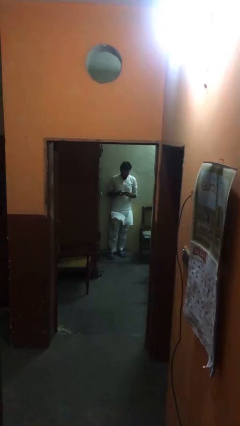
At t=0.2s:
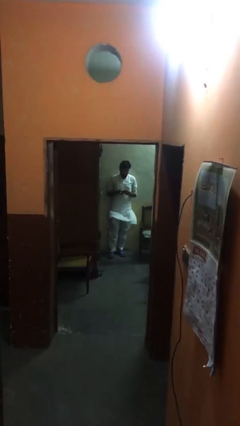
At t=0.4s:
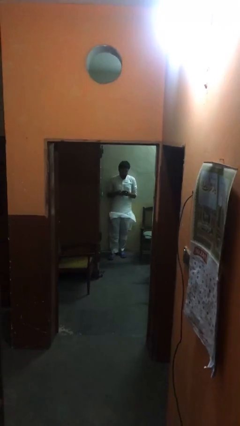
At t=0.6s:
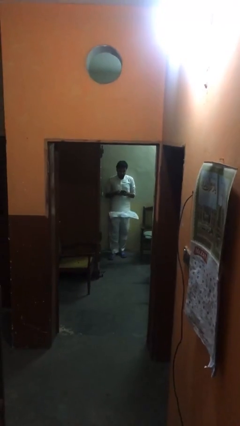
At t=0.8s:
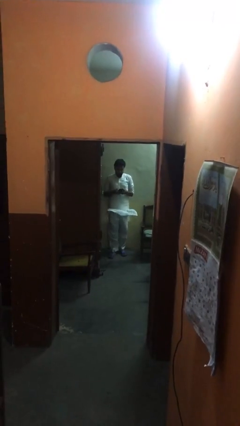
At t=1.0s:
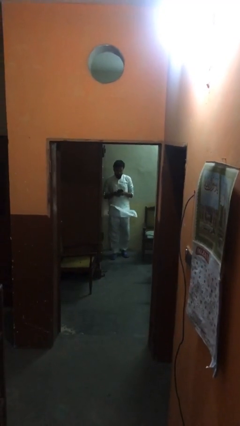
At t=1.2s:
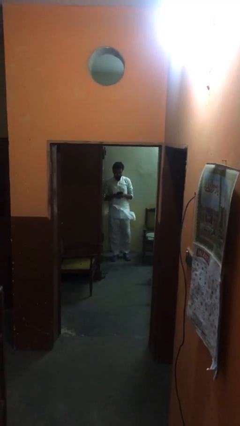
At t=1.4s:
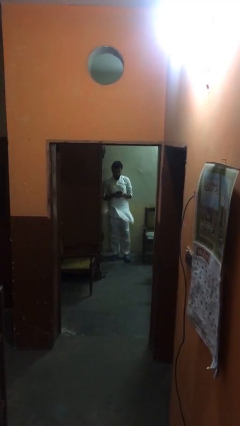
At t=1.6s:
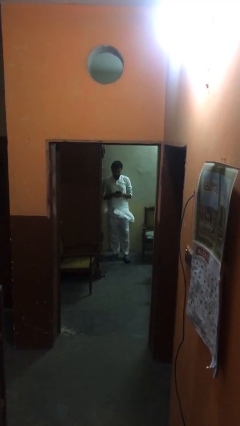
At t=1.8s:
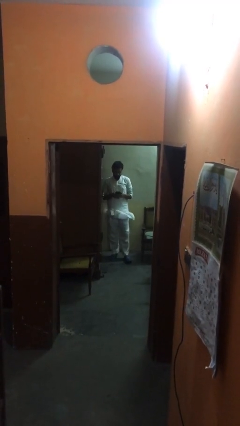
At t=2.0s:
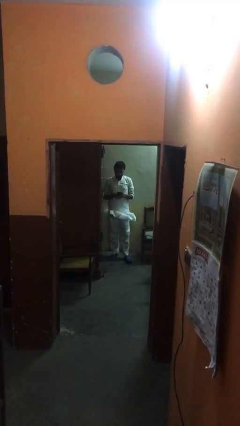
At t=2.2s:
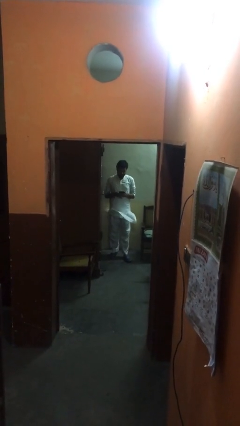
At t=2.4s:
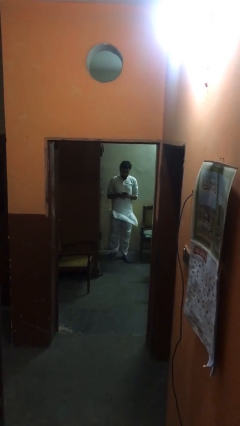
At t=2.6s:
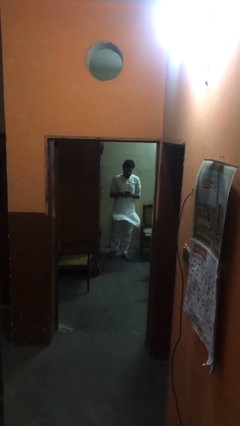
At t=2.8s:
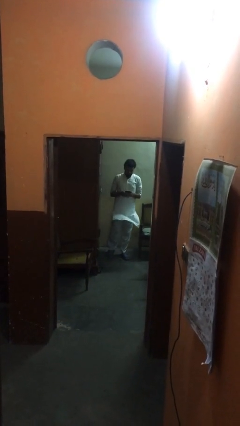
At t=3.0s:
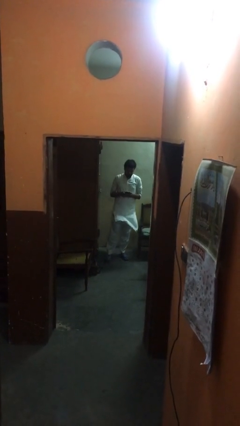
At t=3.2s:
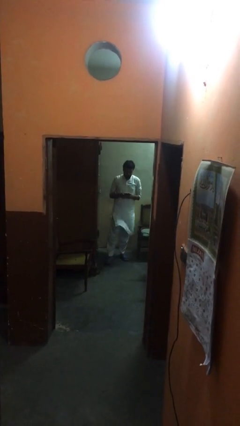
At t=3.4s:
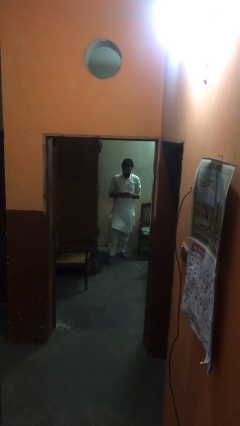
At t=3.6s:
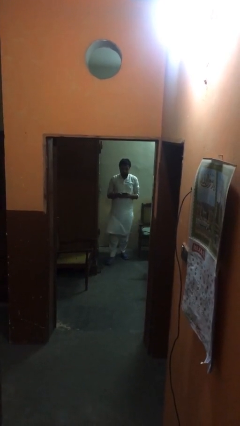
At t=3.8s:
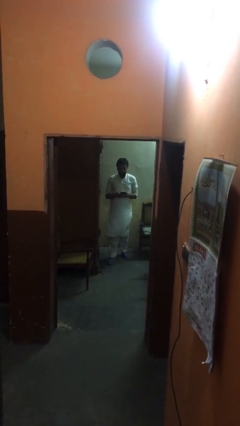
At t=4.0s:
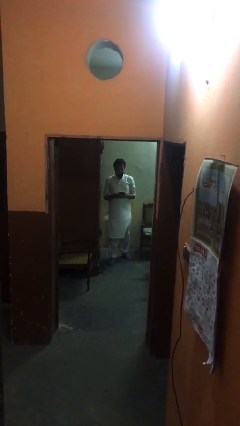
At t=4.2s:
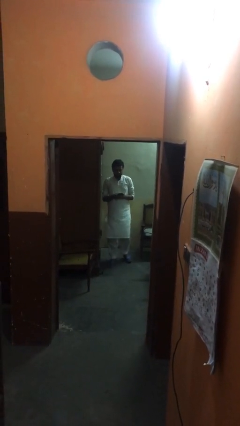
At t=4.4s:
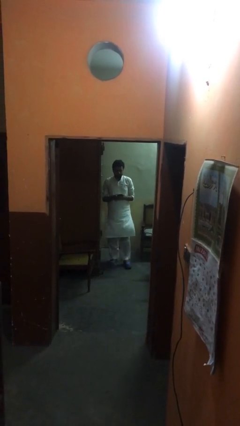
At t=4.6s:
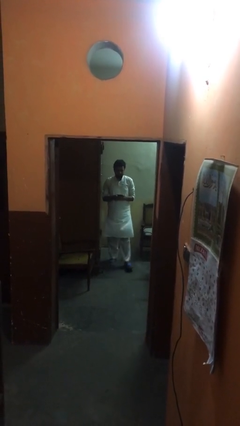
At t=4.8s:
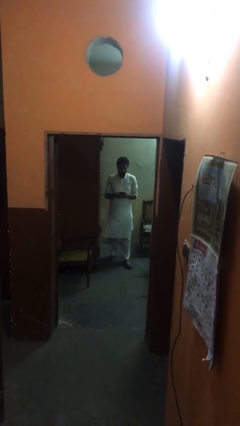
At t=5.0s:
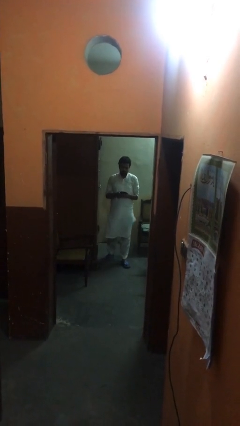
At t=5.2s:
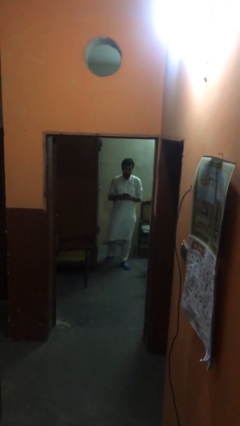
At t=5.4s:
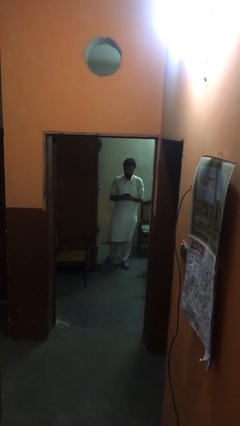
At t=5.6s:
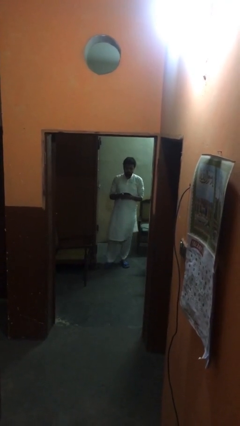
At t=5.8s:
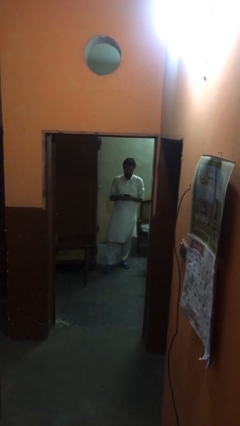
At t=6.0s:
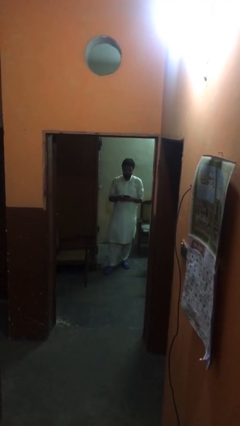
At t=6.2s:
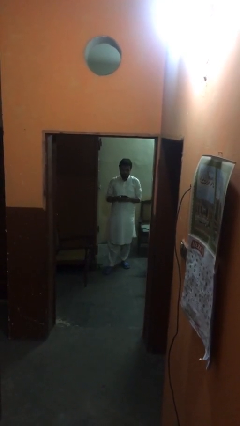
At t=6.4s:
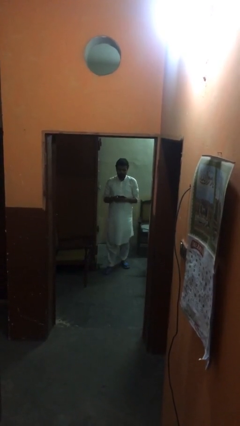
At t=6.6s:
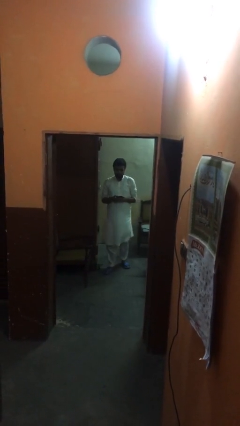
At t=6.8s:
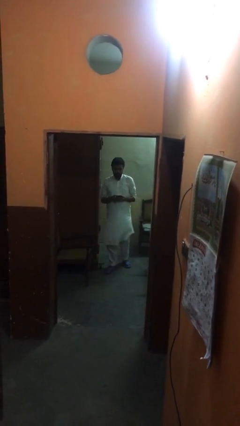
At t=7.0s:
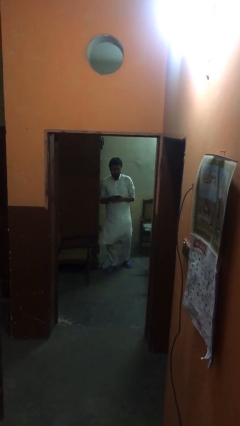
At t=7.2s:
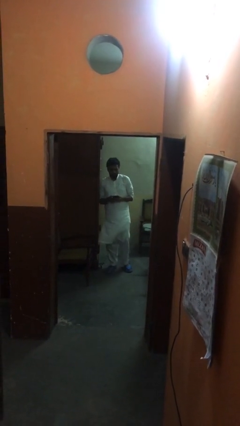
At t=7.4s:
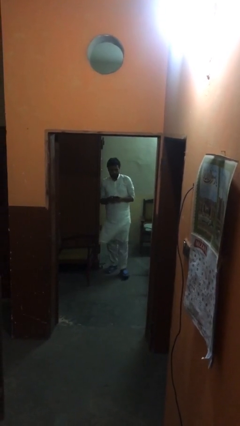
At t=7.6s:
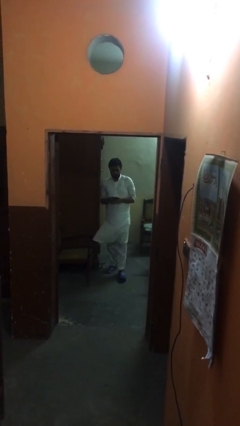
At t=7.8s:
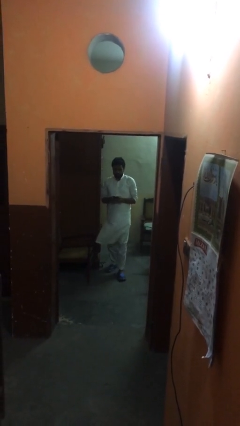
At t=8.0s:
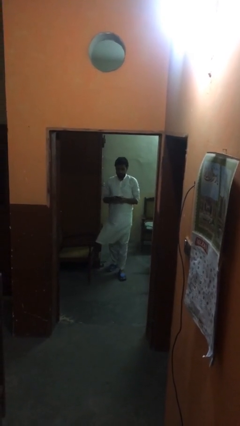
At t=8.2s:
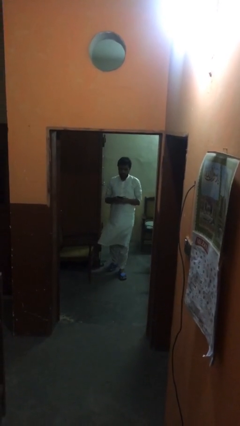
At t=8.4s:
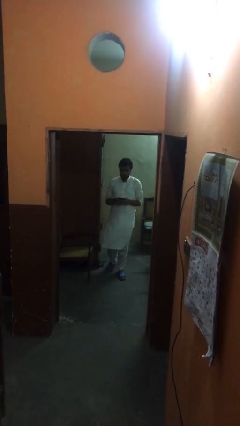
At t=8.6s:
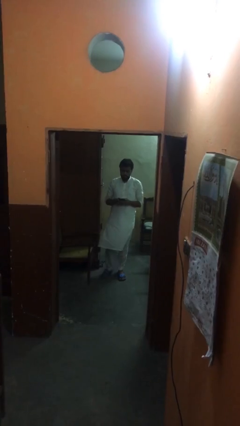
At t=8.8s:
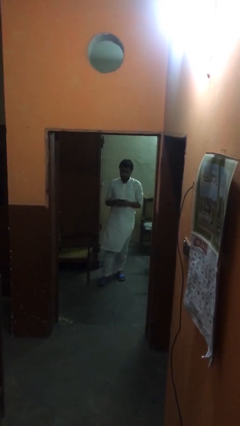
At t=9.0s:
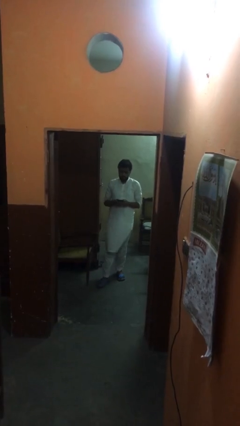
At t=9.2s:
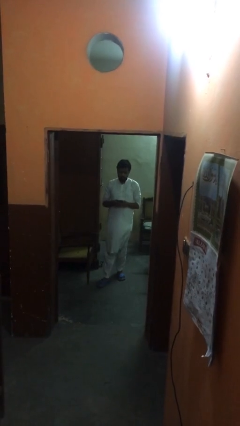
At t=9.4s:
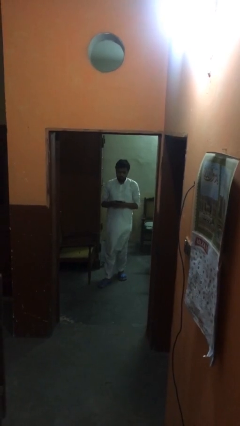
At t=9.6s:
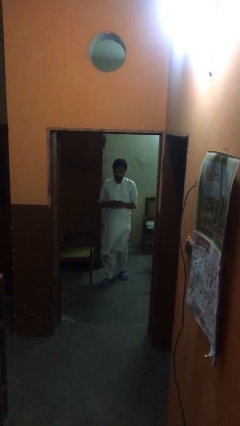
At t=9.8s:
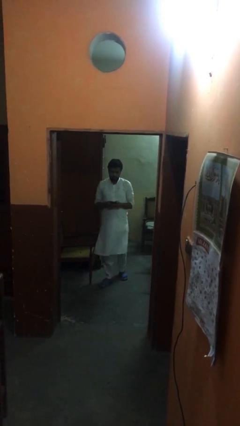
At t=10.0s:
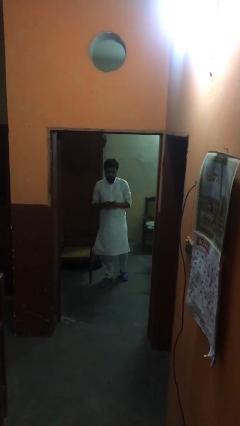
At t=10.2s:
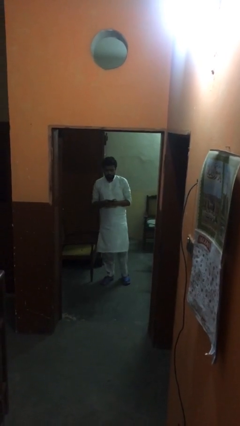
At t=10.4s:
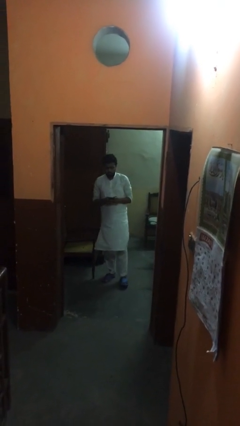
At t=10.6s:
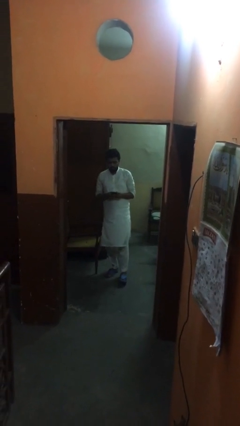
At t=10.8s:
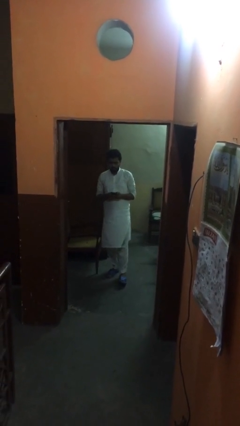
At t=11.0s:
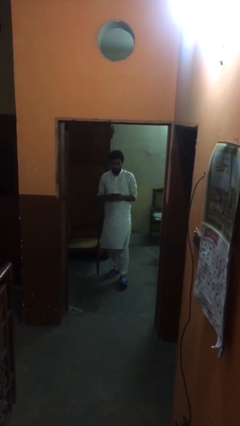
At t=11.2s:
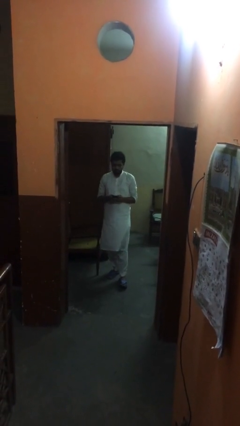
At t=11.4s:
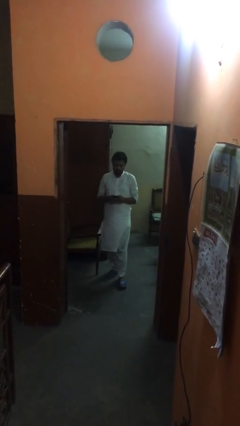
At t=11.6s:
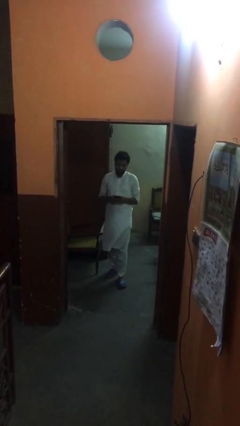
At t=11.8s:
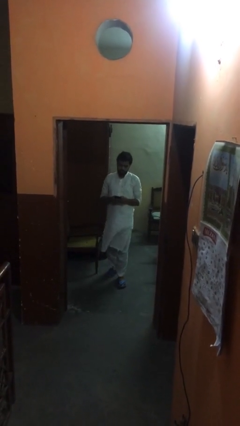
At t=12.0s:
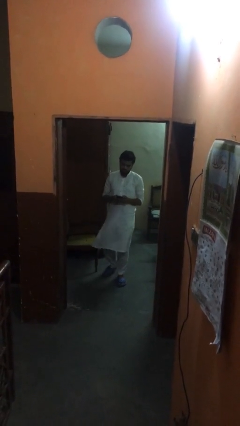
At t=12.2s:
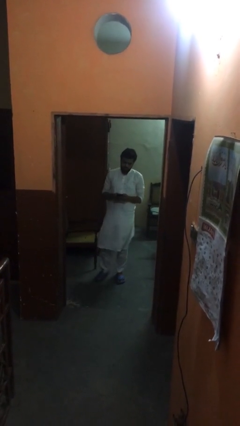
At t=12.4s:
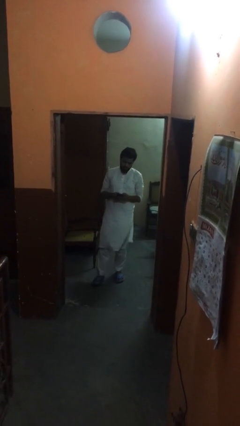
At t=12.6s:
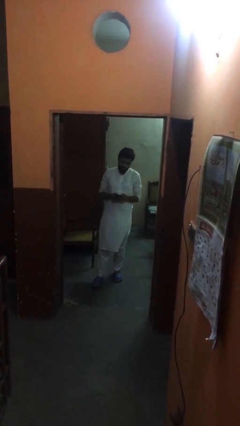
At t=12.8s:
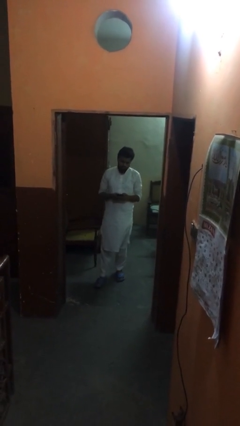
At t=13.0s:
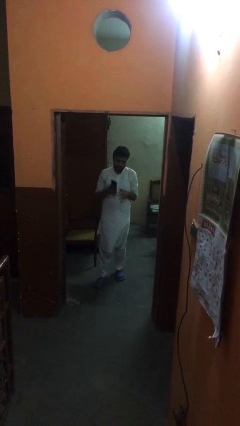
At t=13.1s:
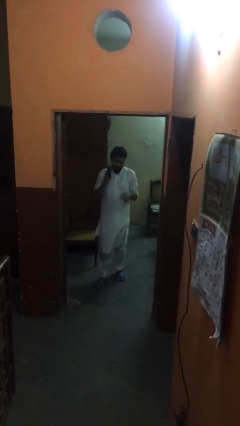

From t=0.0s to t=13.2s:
person texts on phone

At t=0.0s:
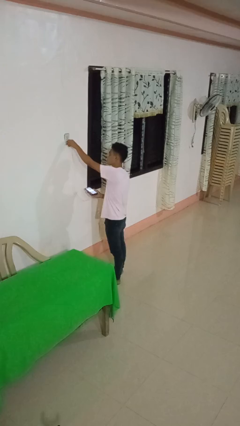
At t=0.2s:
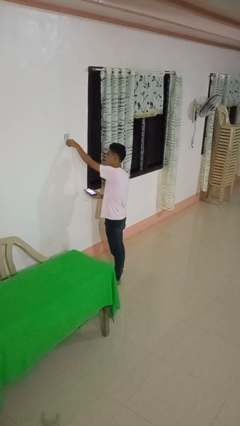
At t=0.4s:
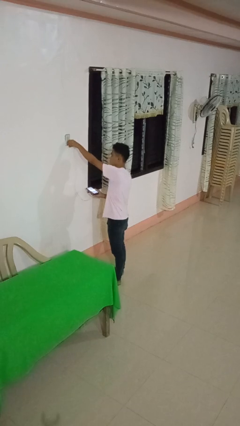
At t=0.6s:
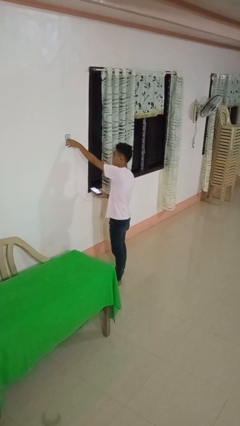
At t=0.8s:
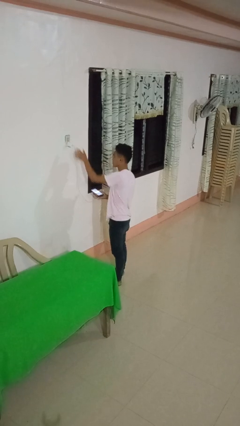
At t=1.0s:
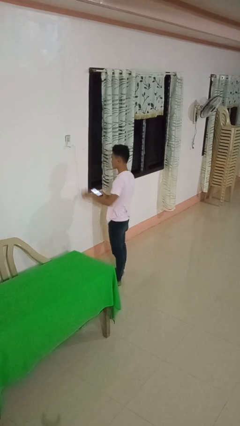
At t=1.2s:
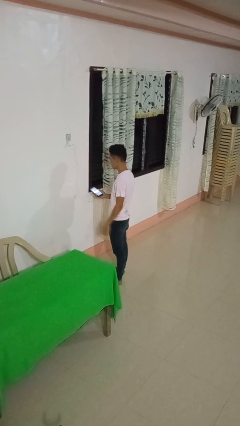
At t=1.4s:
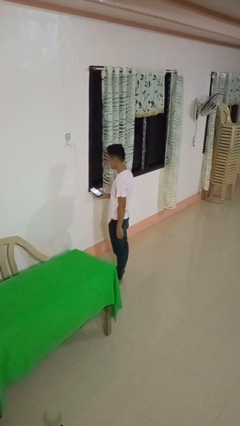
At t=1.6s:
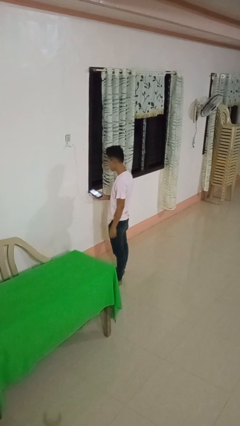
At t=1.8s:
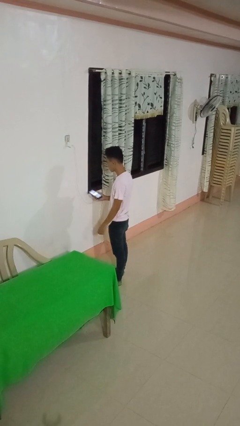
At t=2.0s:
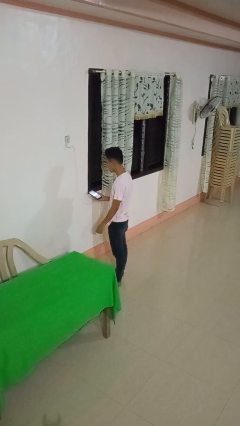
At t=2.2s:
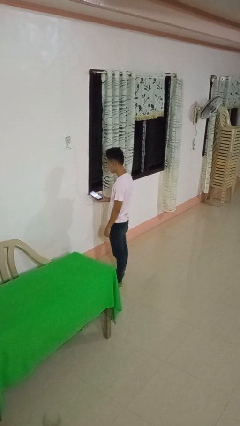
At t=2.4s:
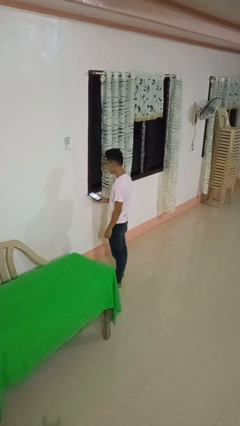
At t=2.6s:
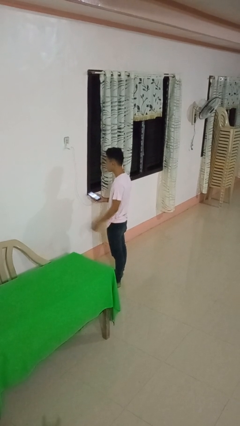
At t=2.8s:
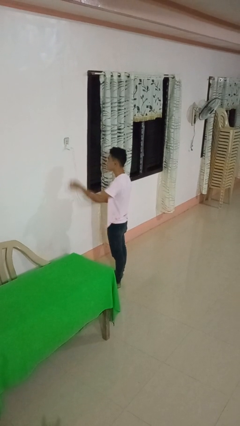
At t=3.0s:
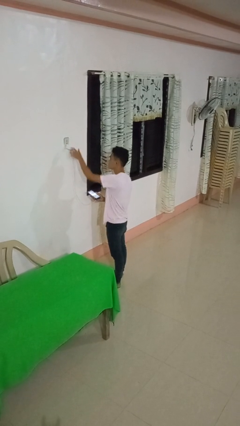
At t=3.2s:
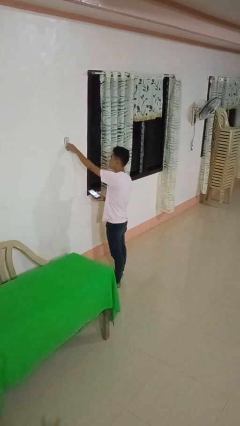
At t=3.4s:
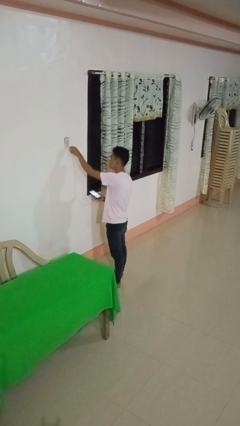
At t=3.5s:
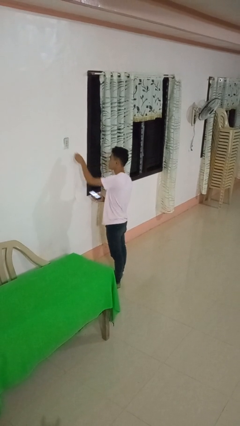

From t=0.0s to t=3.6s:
person plugs into electrical socket

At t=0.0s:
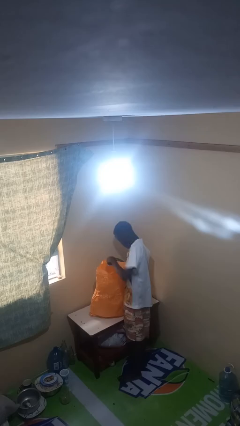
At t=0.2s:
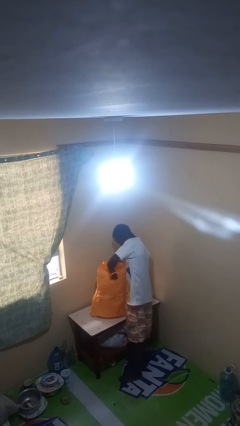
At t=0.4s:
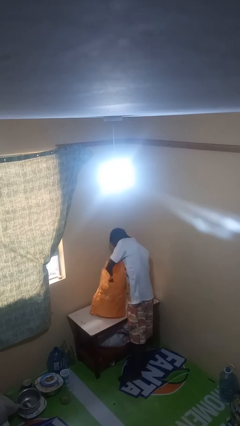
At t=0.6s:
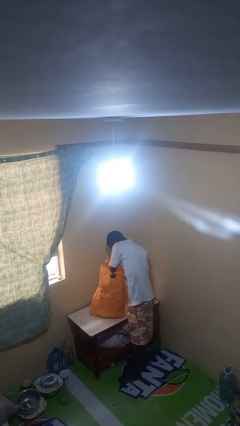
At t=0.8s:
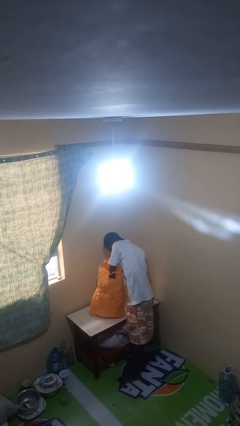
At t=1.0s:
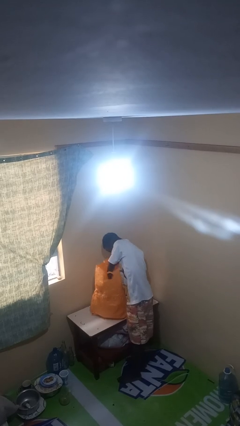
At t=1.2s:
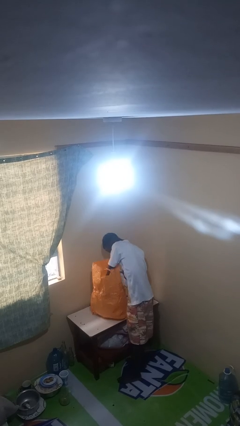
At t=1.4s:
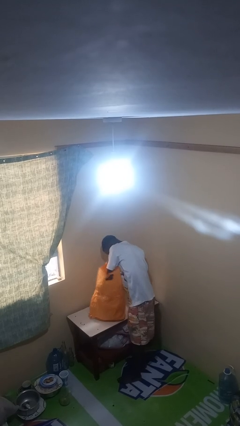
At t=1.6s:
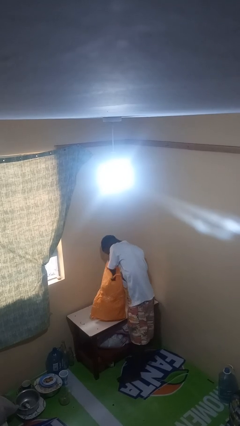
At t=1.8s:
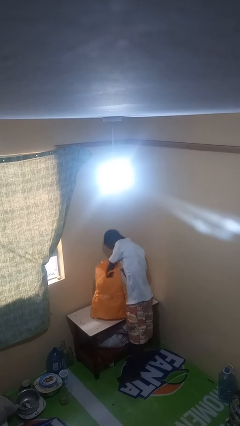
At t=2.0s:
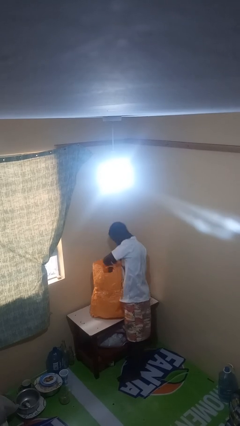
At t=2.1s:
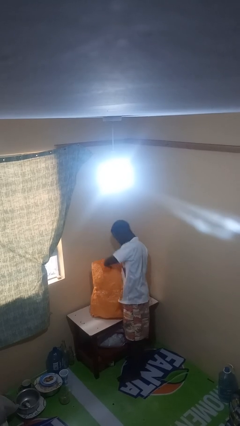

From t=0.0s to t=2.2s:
person searches in bag
